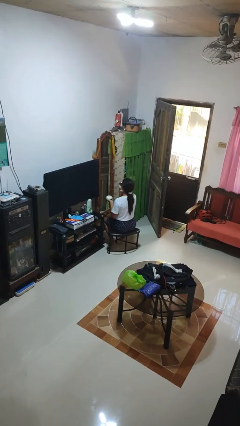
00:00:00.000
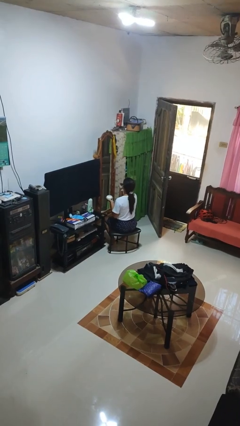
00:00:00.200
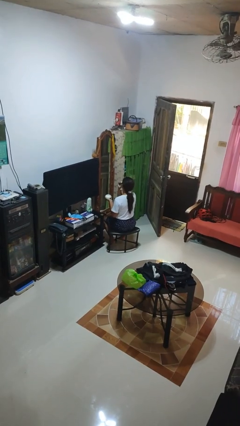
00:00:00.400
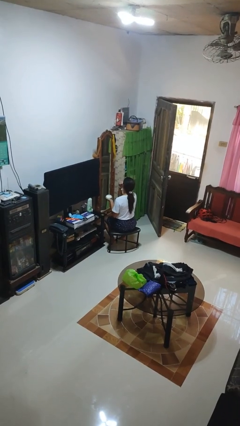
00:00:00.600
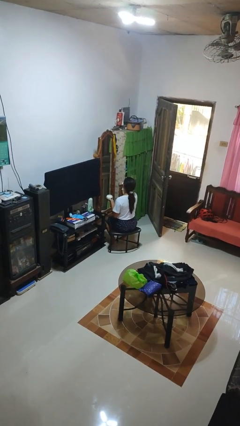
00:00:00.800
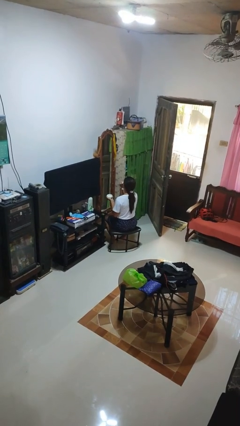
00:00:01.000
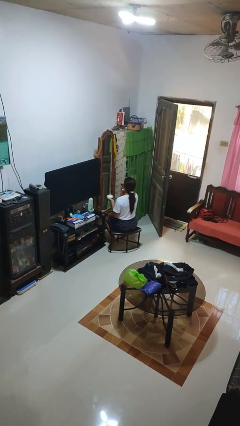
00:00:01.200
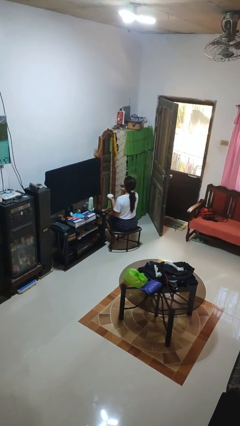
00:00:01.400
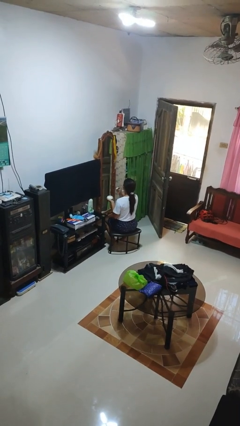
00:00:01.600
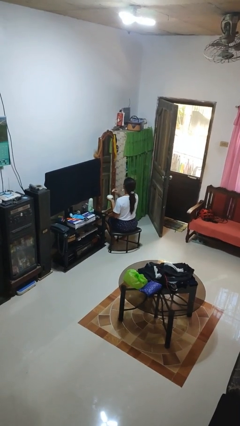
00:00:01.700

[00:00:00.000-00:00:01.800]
person applies foundation makeup

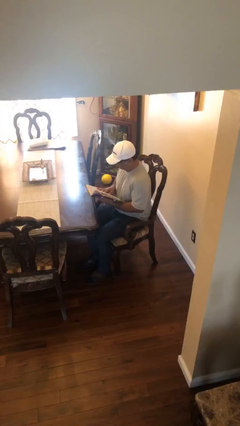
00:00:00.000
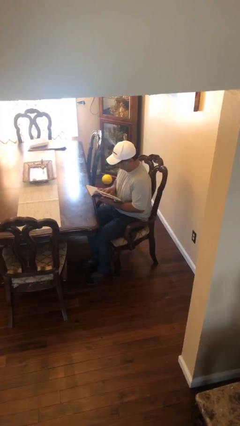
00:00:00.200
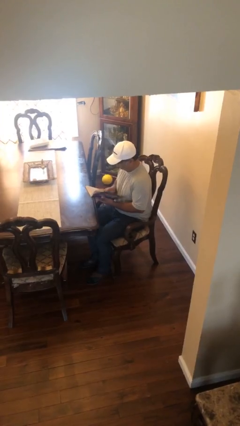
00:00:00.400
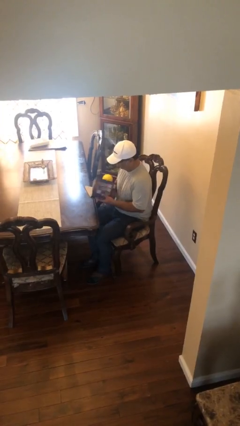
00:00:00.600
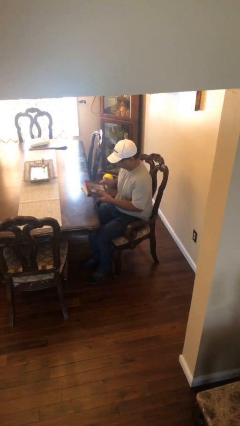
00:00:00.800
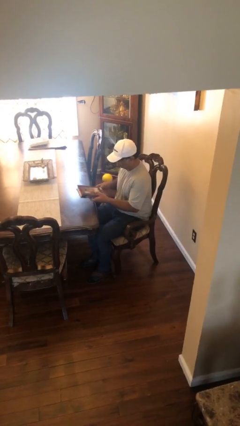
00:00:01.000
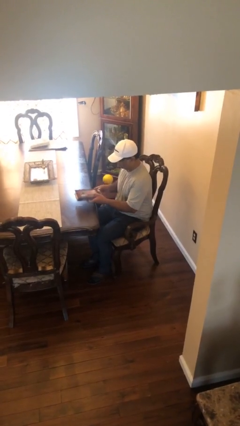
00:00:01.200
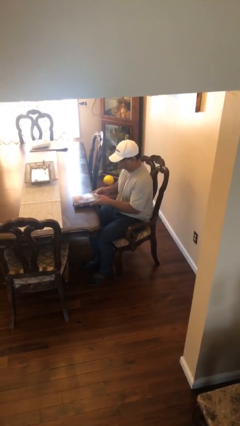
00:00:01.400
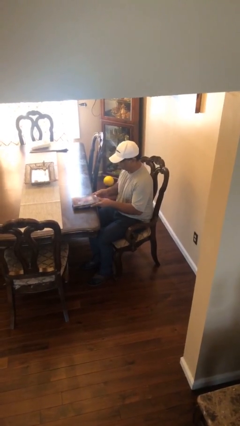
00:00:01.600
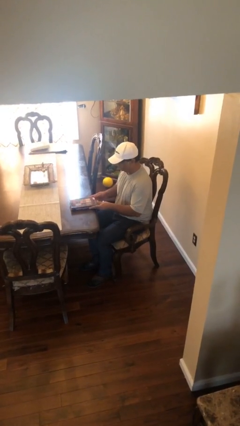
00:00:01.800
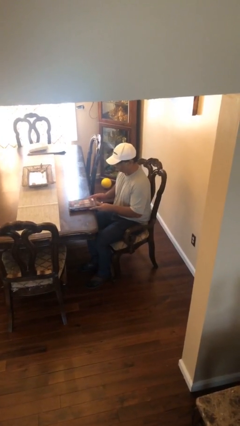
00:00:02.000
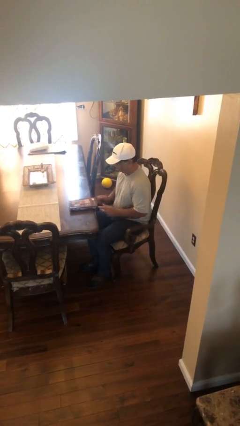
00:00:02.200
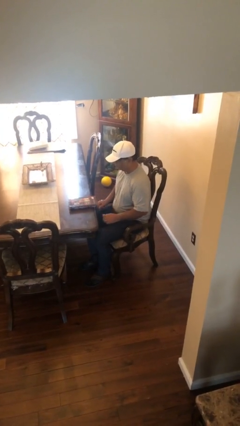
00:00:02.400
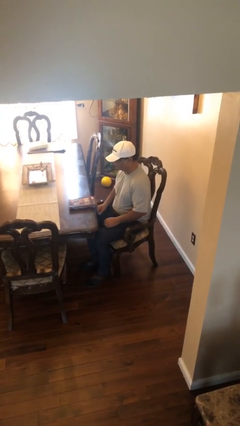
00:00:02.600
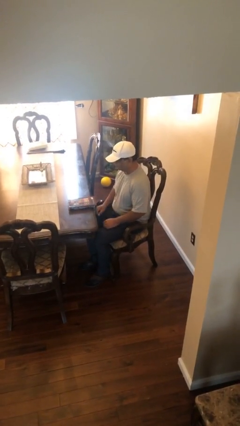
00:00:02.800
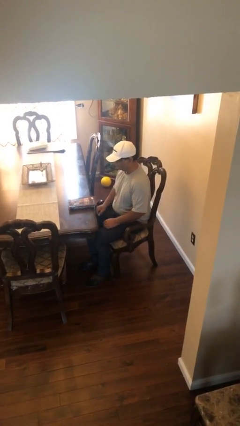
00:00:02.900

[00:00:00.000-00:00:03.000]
person puts down object on table

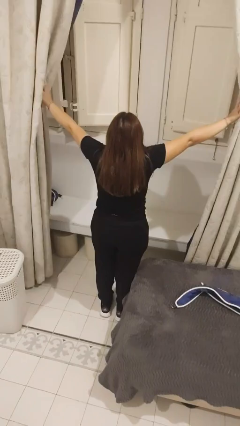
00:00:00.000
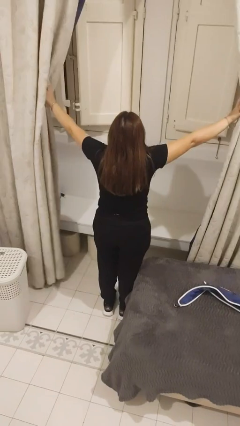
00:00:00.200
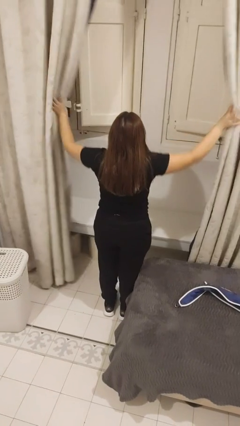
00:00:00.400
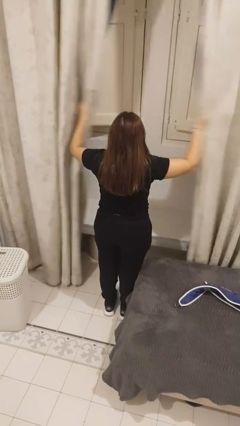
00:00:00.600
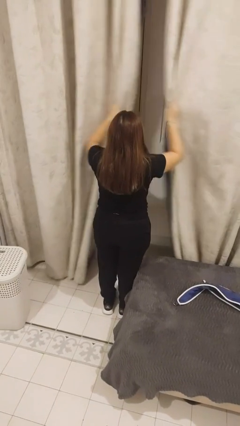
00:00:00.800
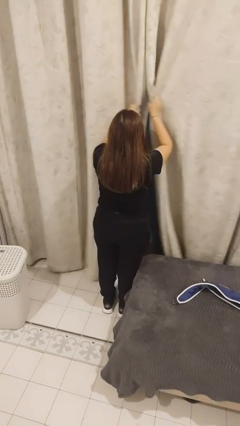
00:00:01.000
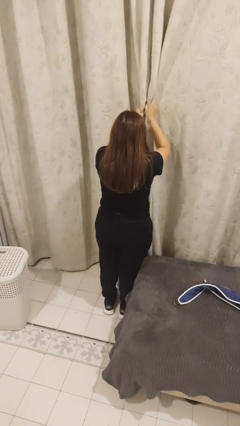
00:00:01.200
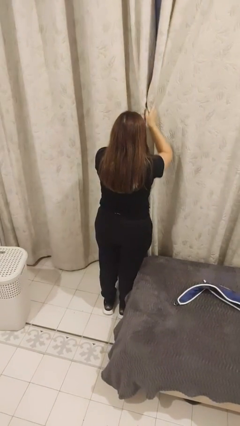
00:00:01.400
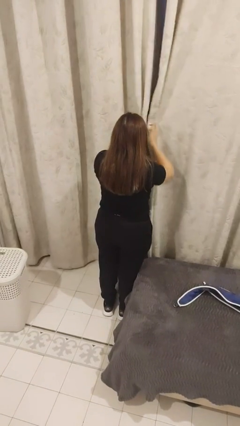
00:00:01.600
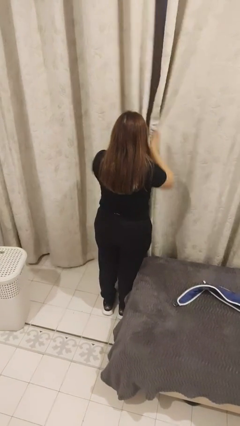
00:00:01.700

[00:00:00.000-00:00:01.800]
person closes curtains

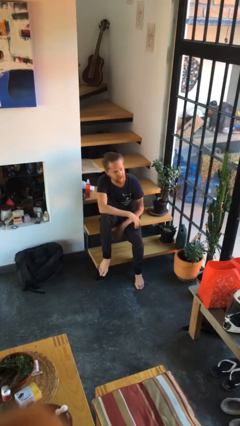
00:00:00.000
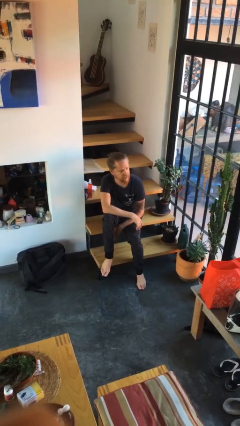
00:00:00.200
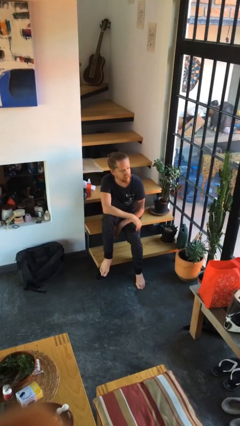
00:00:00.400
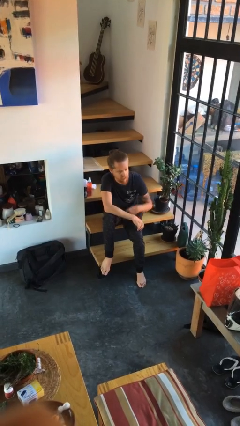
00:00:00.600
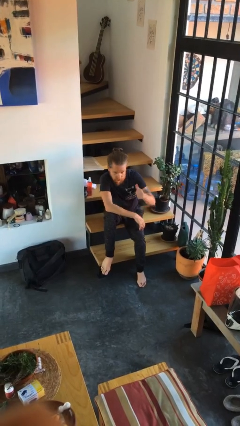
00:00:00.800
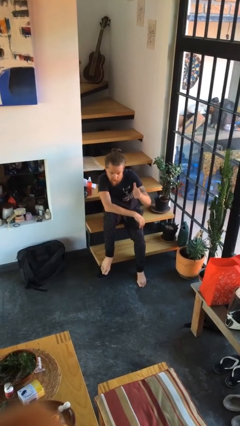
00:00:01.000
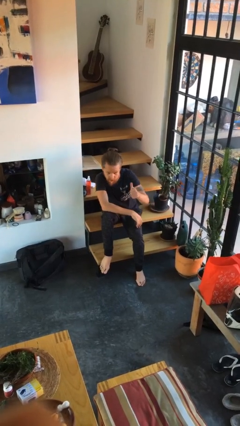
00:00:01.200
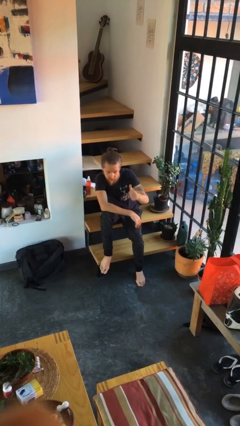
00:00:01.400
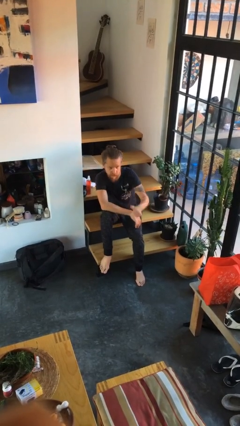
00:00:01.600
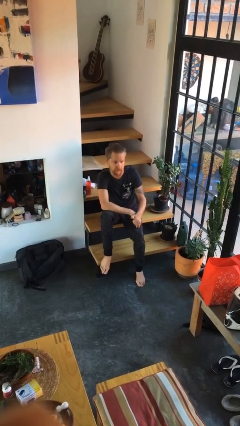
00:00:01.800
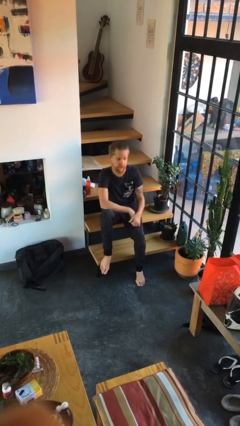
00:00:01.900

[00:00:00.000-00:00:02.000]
person gestures thumbs up

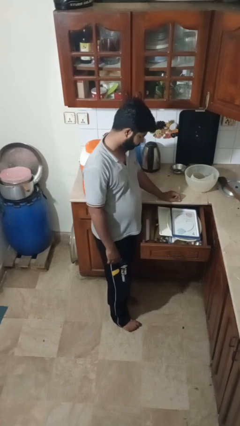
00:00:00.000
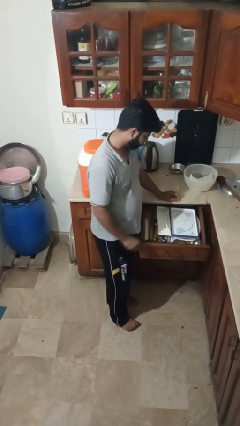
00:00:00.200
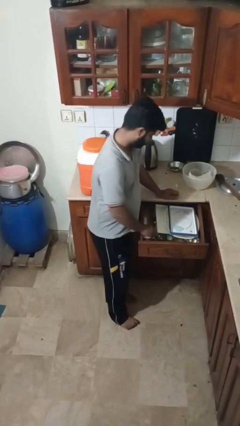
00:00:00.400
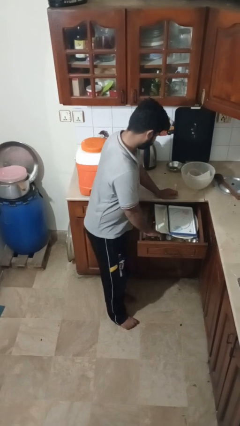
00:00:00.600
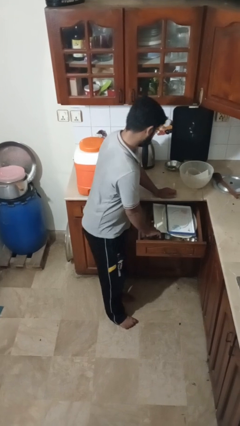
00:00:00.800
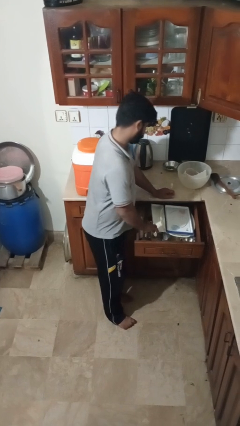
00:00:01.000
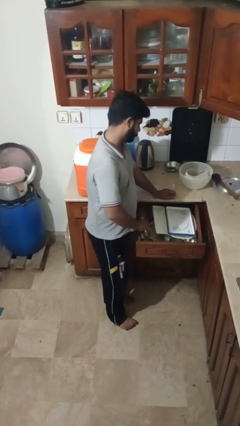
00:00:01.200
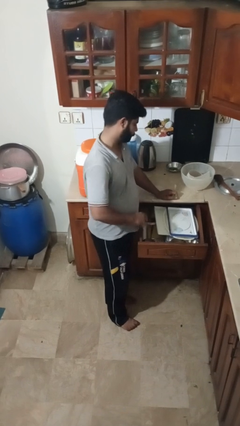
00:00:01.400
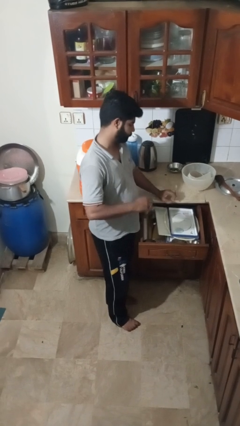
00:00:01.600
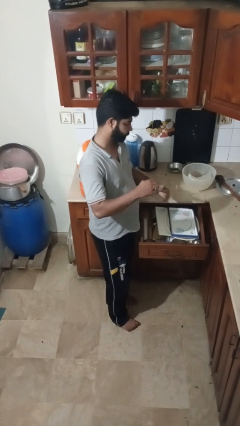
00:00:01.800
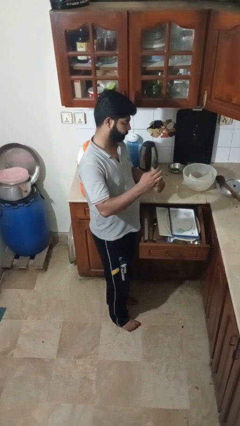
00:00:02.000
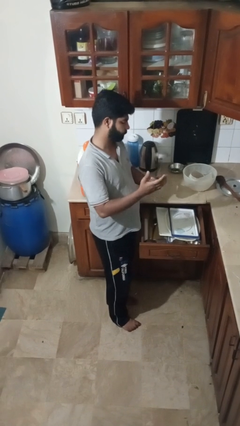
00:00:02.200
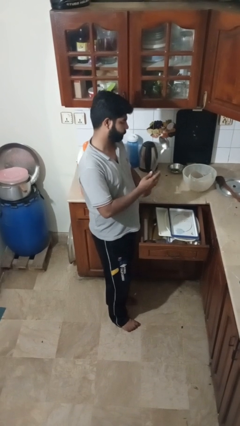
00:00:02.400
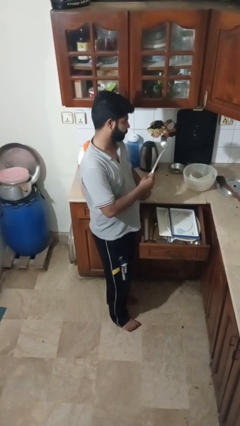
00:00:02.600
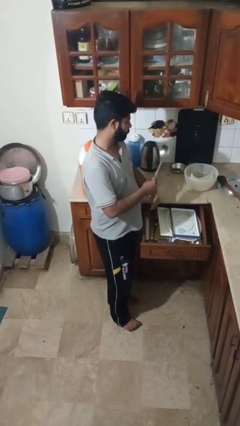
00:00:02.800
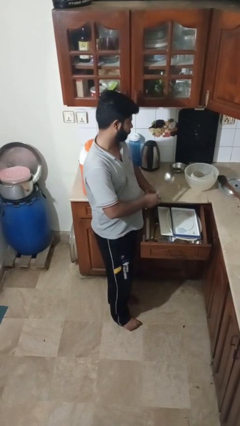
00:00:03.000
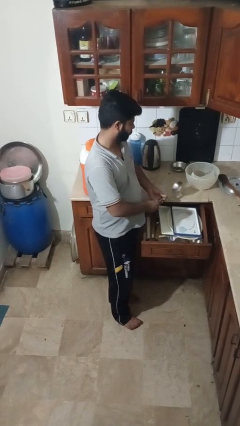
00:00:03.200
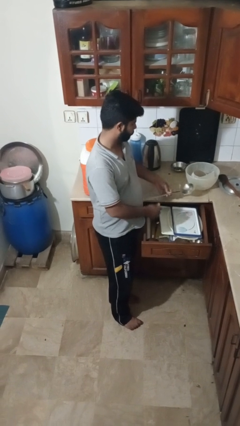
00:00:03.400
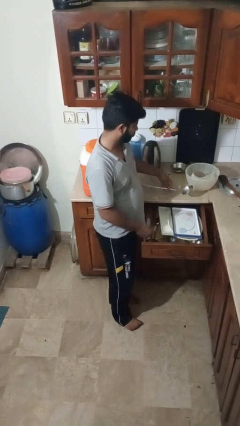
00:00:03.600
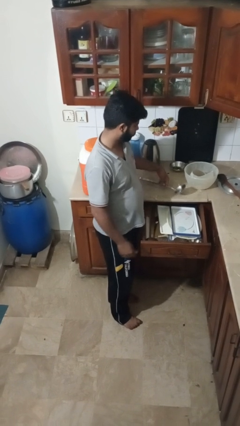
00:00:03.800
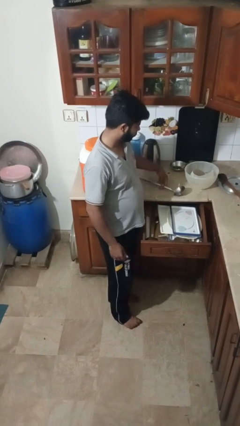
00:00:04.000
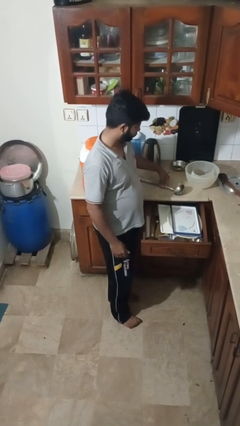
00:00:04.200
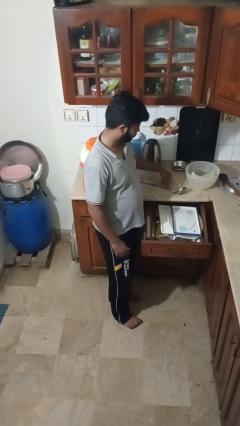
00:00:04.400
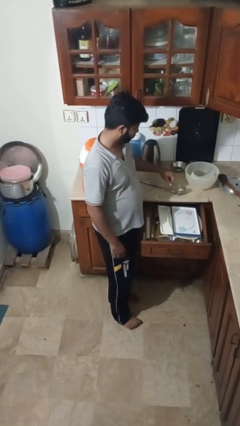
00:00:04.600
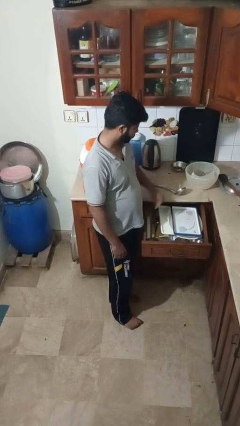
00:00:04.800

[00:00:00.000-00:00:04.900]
person takes object from kitchen drawer

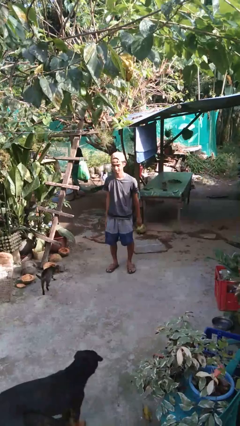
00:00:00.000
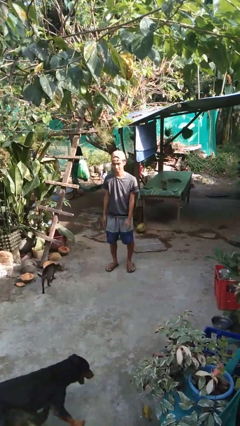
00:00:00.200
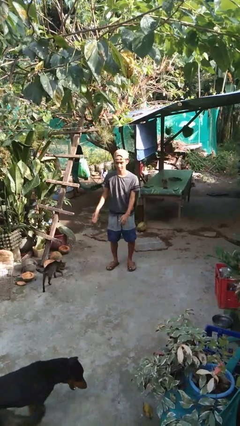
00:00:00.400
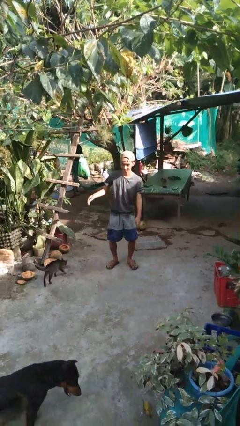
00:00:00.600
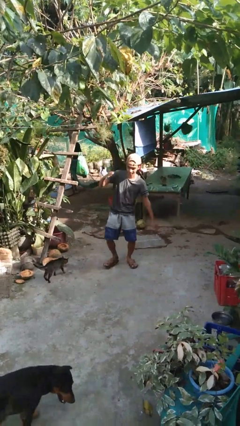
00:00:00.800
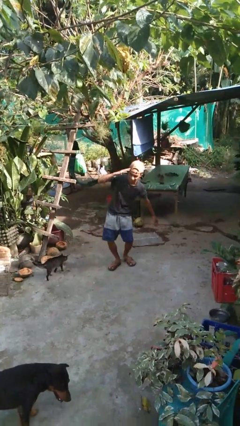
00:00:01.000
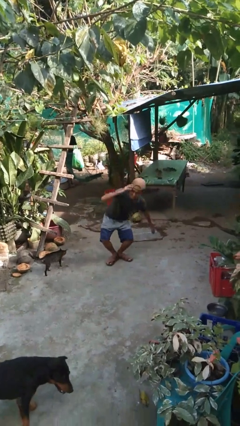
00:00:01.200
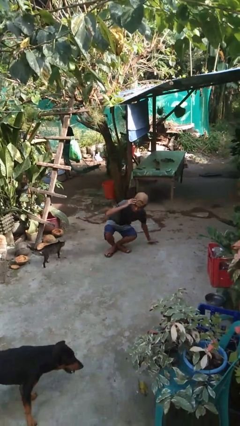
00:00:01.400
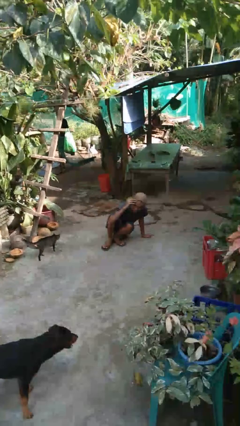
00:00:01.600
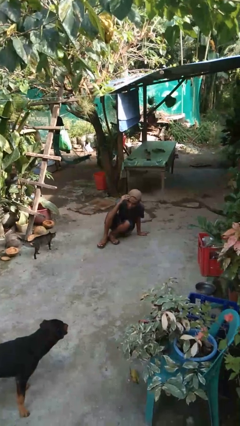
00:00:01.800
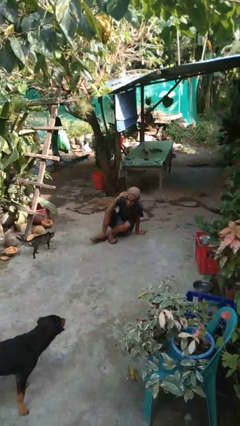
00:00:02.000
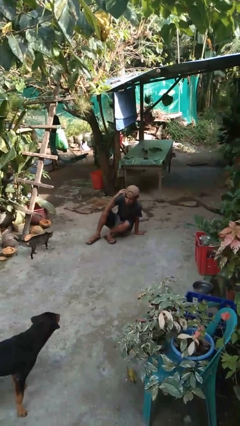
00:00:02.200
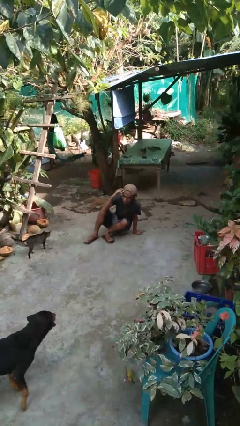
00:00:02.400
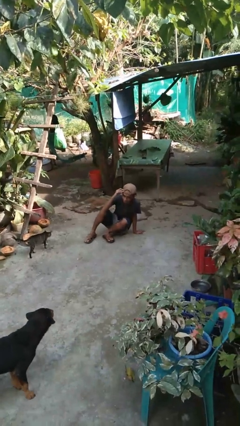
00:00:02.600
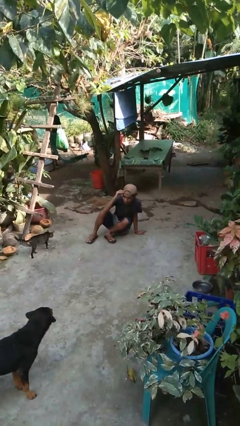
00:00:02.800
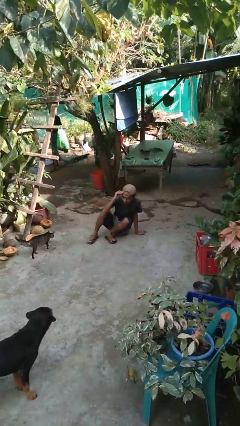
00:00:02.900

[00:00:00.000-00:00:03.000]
person falls while standing

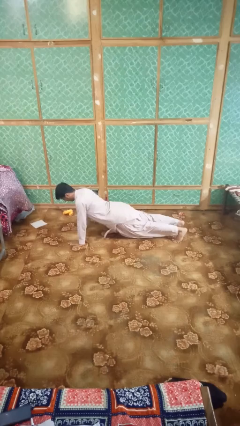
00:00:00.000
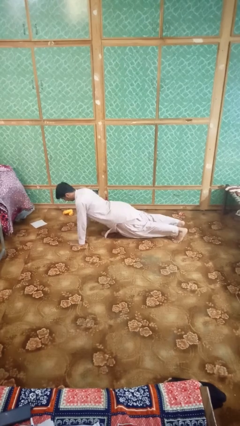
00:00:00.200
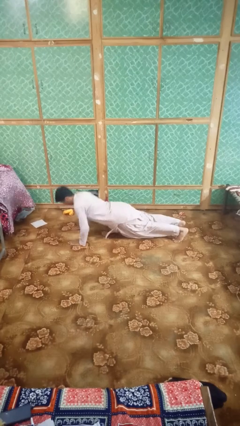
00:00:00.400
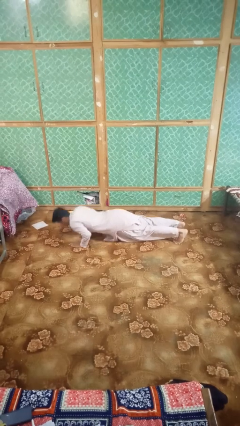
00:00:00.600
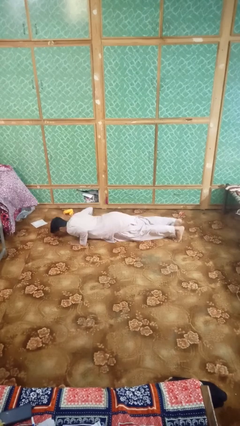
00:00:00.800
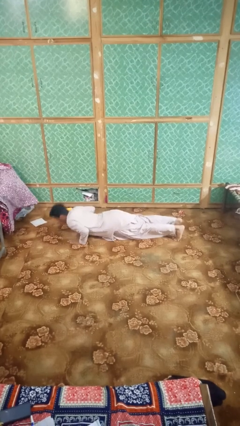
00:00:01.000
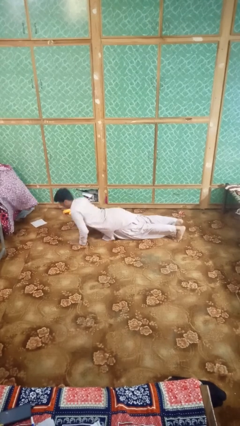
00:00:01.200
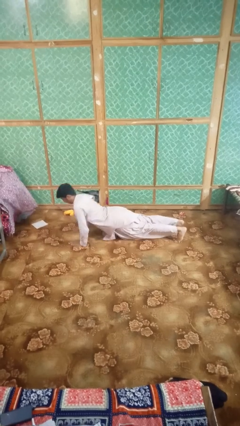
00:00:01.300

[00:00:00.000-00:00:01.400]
person exercises with pushup
